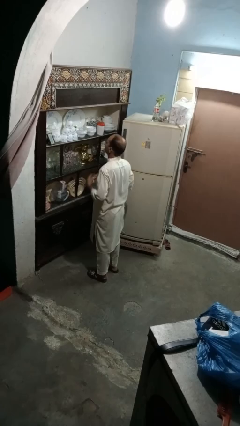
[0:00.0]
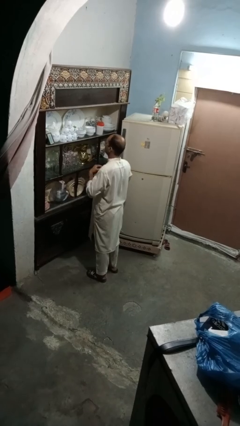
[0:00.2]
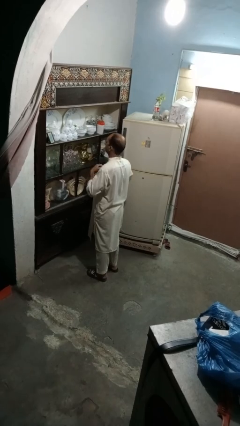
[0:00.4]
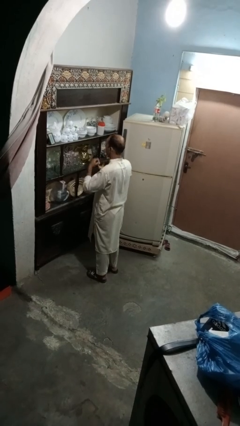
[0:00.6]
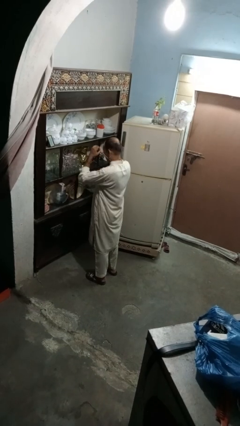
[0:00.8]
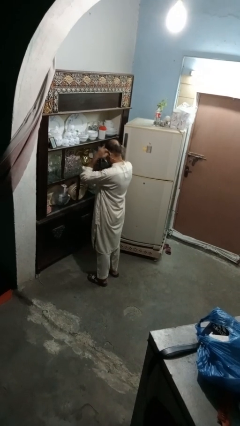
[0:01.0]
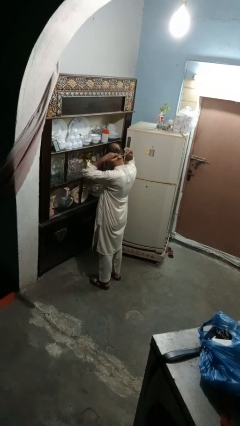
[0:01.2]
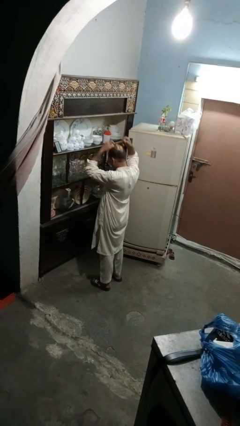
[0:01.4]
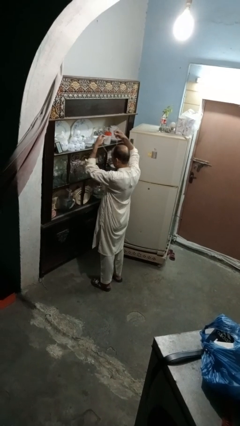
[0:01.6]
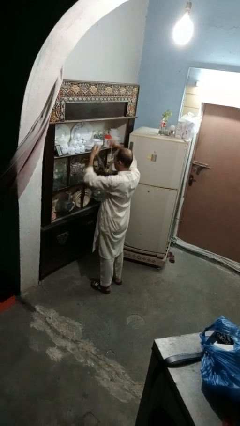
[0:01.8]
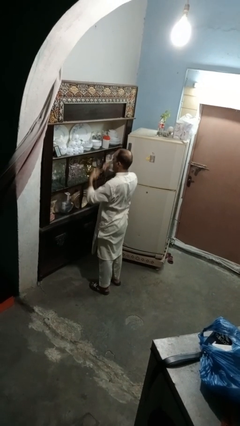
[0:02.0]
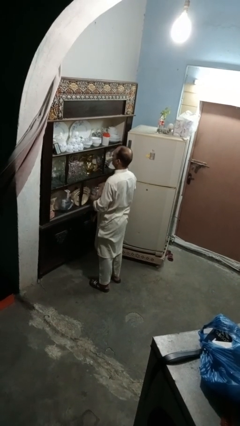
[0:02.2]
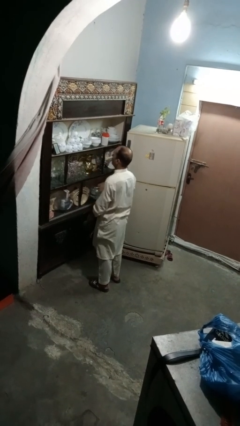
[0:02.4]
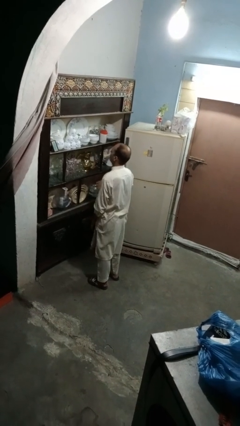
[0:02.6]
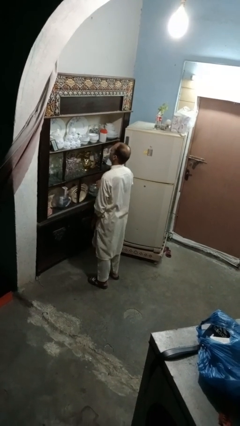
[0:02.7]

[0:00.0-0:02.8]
person takes off necklace

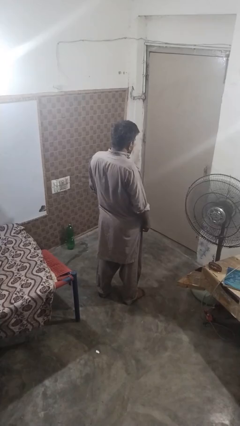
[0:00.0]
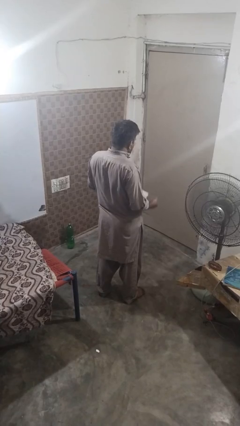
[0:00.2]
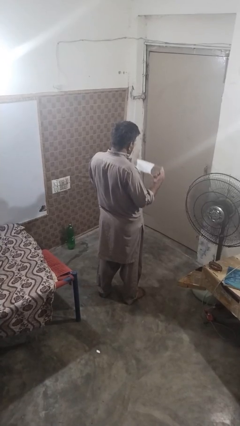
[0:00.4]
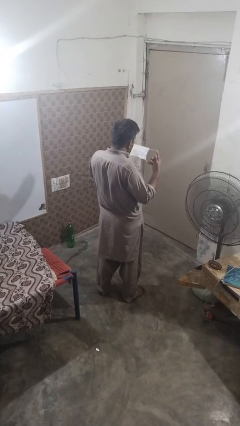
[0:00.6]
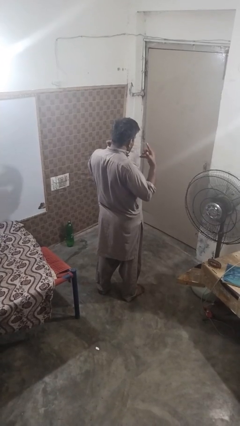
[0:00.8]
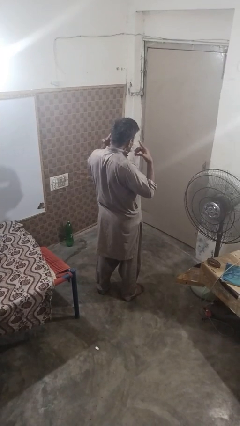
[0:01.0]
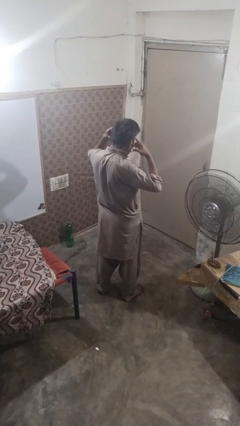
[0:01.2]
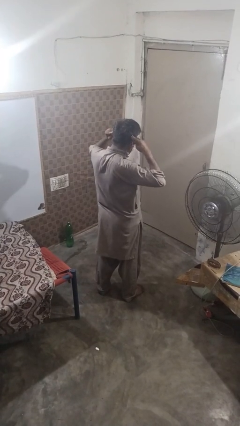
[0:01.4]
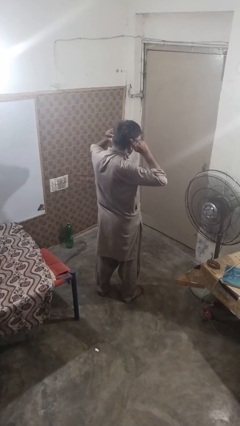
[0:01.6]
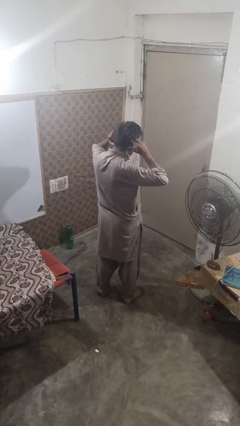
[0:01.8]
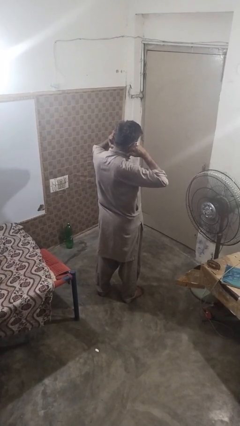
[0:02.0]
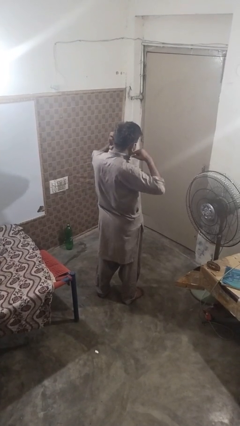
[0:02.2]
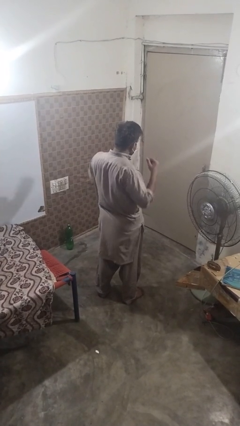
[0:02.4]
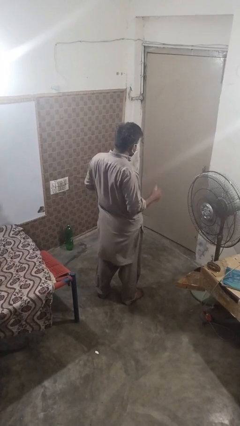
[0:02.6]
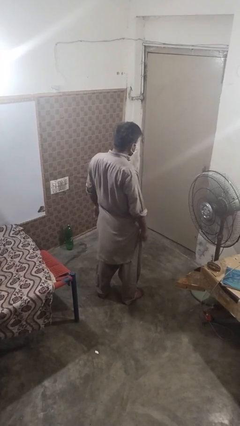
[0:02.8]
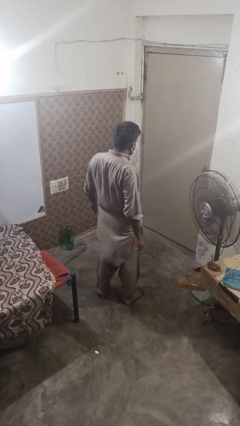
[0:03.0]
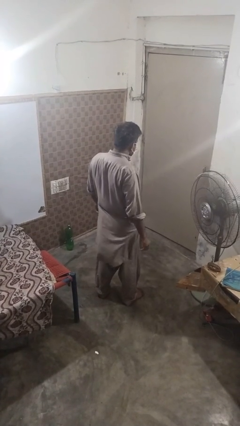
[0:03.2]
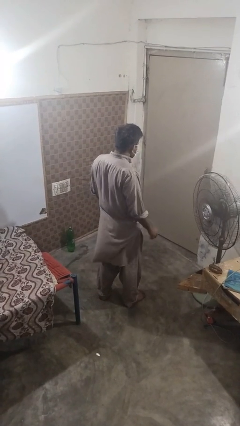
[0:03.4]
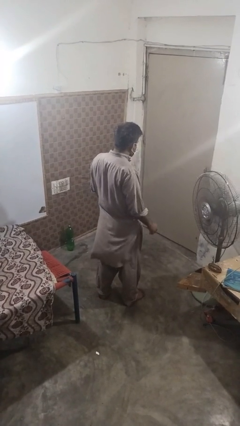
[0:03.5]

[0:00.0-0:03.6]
person puts on facemask

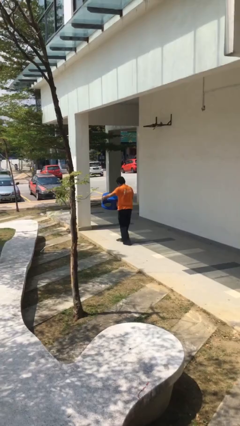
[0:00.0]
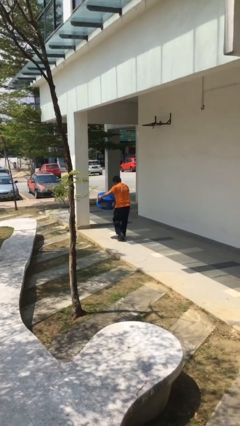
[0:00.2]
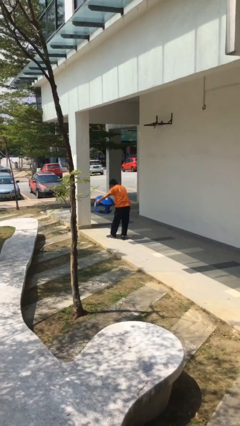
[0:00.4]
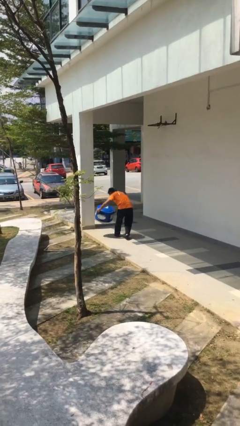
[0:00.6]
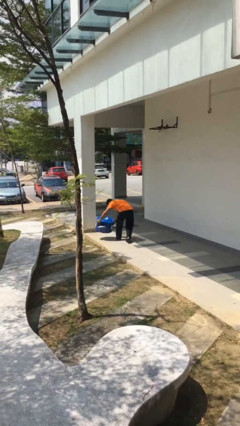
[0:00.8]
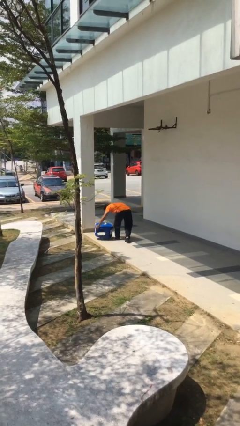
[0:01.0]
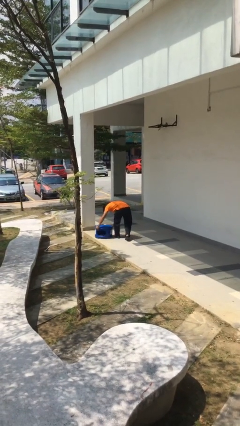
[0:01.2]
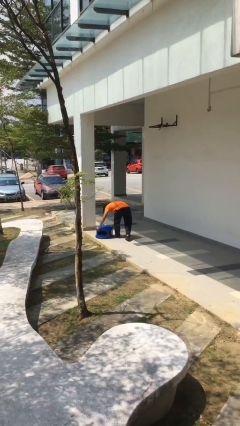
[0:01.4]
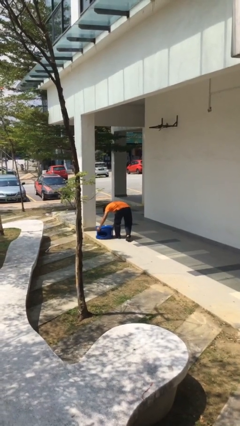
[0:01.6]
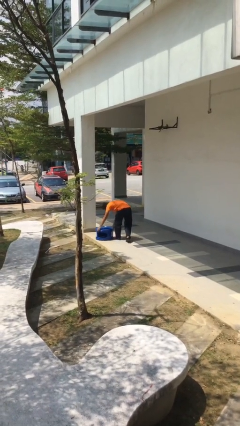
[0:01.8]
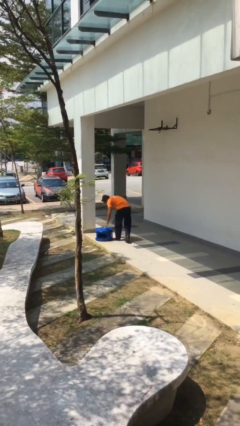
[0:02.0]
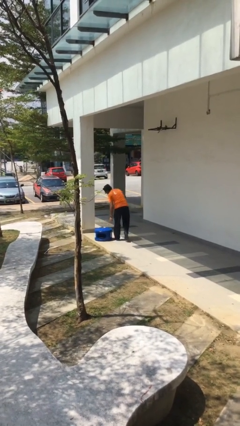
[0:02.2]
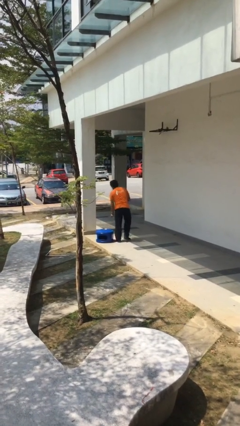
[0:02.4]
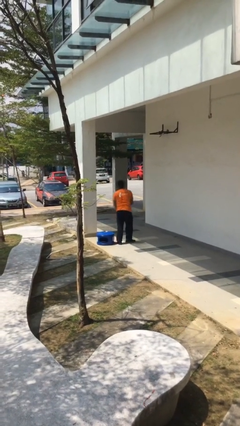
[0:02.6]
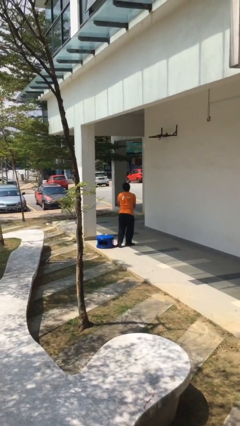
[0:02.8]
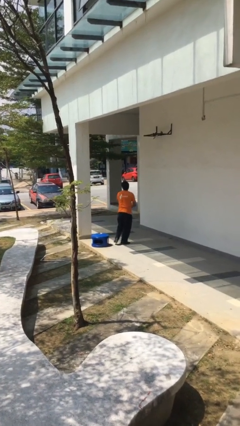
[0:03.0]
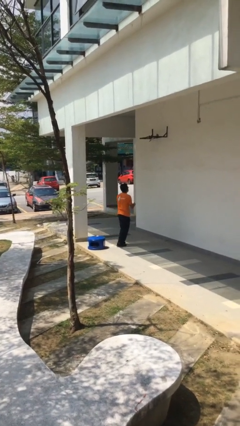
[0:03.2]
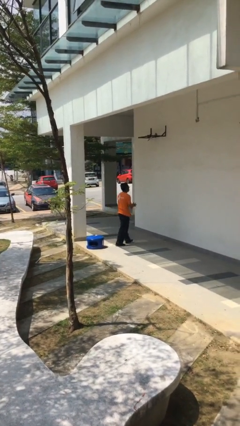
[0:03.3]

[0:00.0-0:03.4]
person puts down object on floor

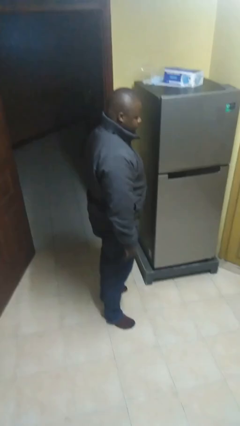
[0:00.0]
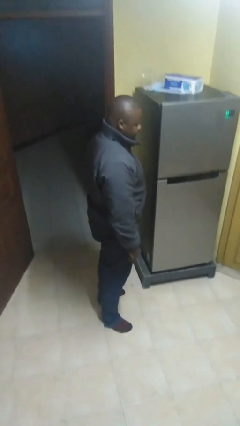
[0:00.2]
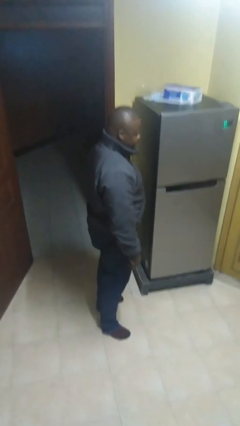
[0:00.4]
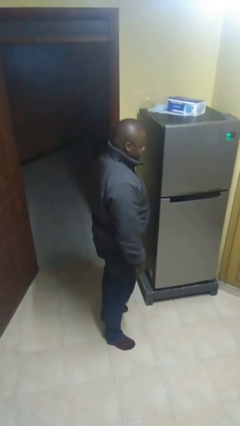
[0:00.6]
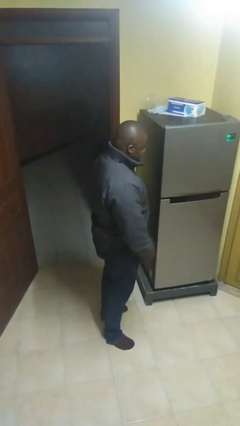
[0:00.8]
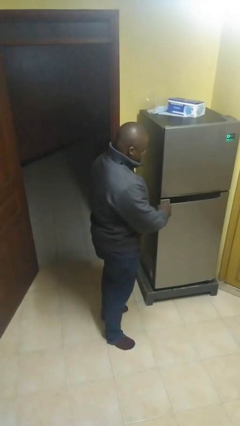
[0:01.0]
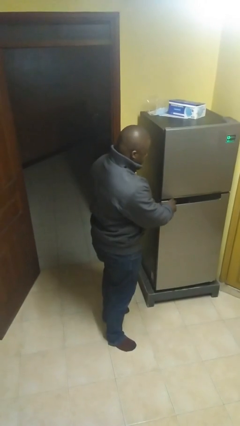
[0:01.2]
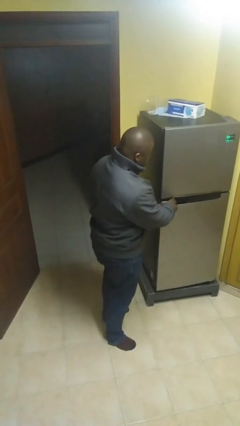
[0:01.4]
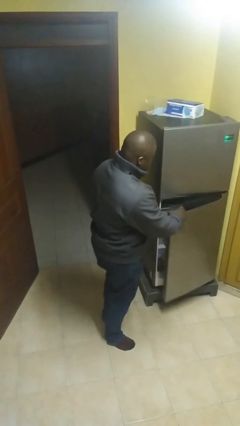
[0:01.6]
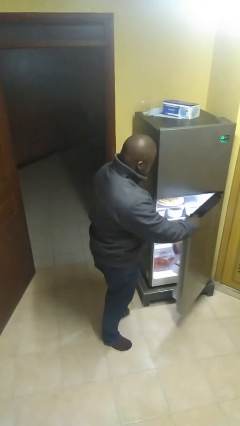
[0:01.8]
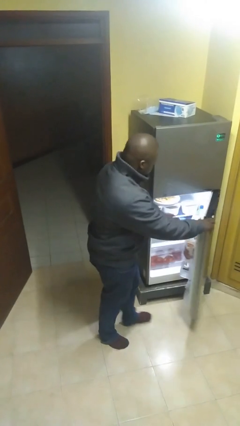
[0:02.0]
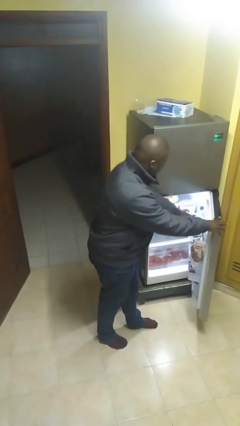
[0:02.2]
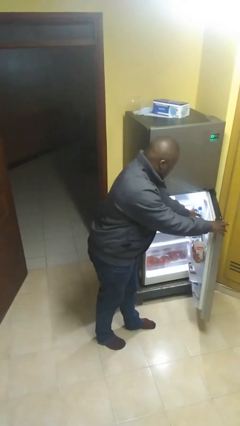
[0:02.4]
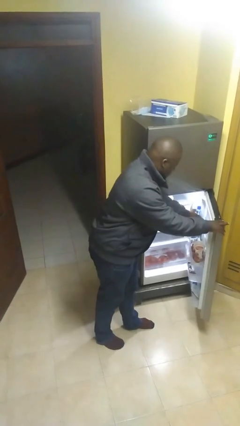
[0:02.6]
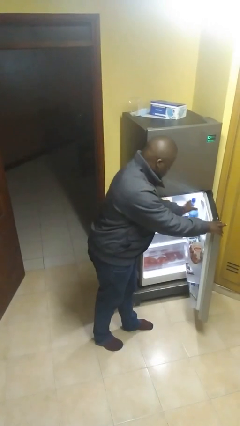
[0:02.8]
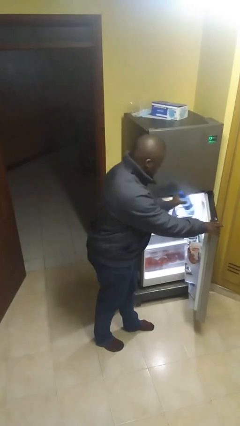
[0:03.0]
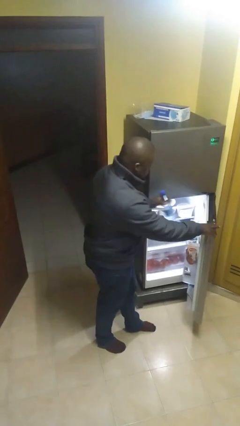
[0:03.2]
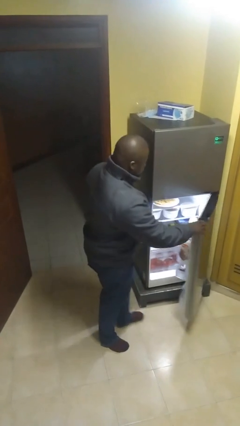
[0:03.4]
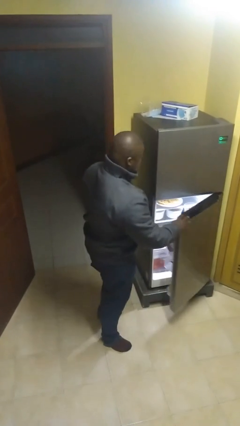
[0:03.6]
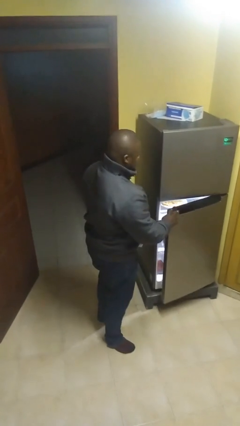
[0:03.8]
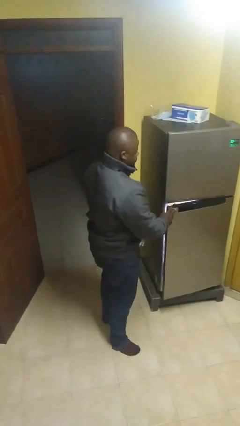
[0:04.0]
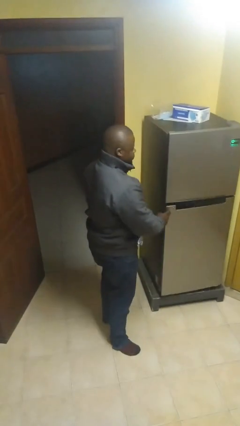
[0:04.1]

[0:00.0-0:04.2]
person takes object from refrigerator

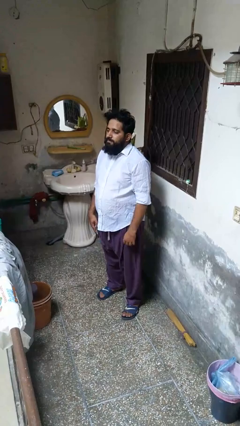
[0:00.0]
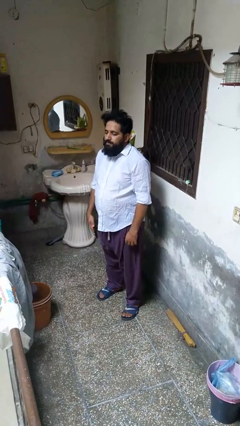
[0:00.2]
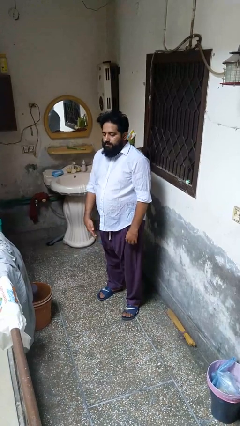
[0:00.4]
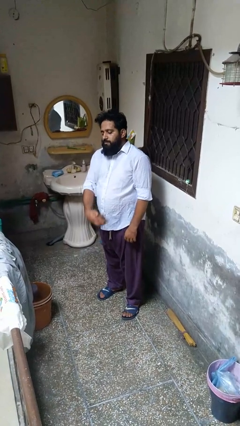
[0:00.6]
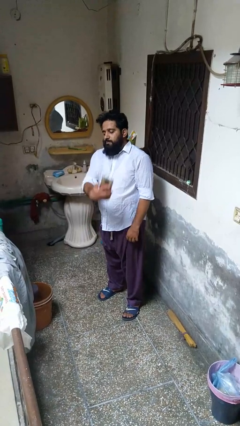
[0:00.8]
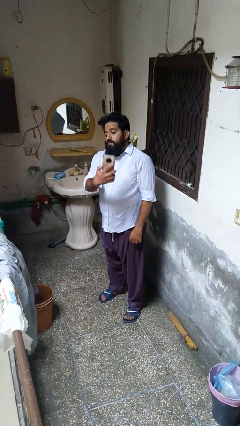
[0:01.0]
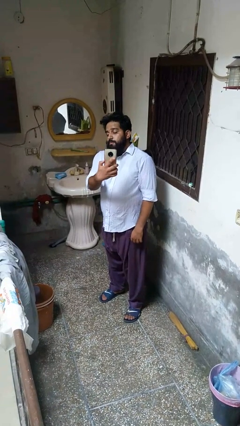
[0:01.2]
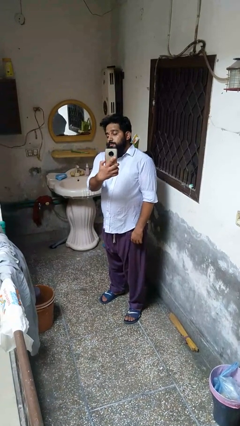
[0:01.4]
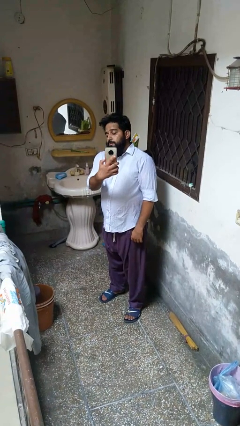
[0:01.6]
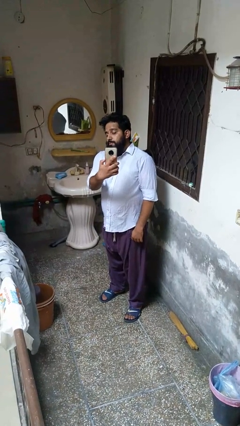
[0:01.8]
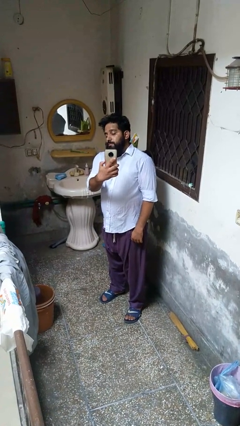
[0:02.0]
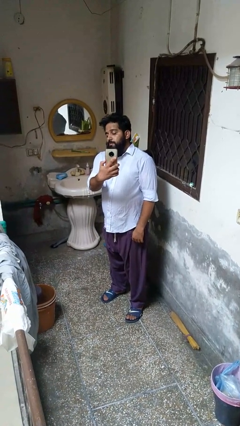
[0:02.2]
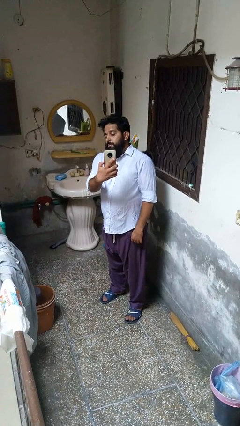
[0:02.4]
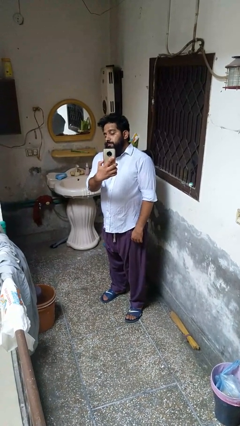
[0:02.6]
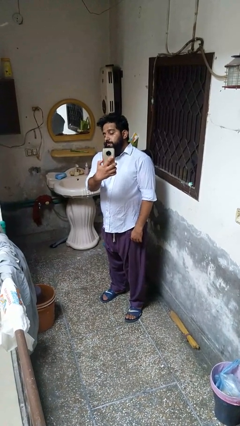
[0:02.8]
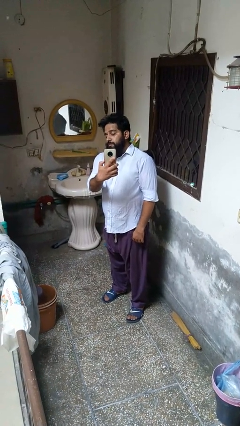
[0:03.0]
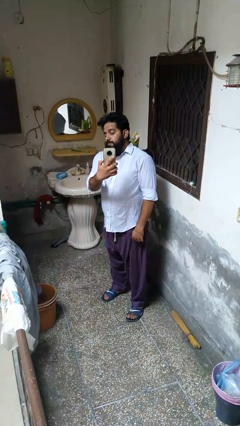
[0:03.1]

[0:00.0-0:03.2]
person takes selfie
